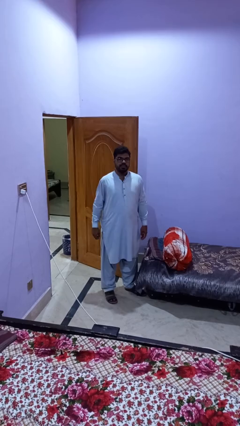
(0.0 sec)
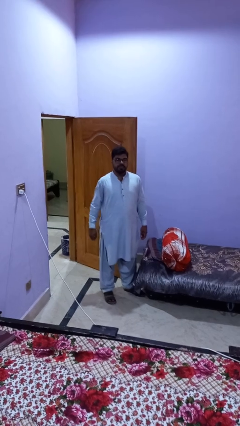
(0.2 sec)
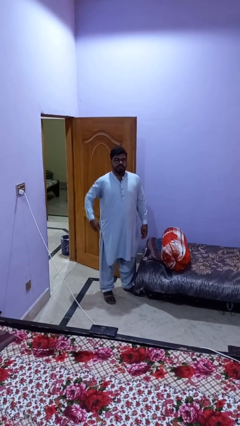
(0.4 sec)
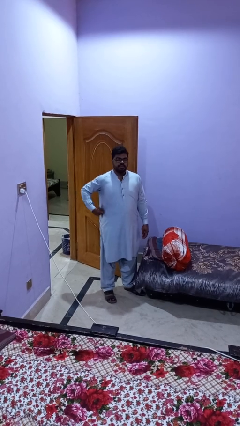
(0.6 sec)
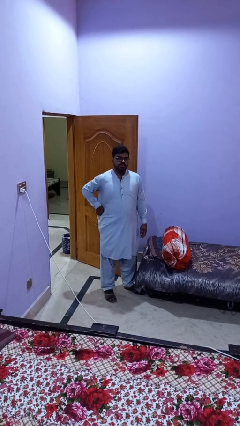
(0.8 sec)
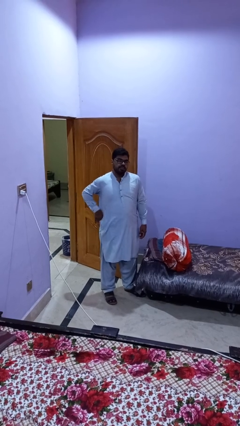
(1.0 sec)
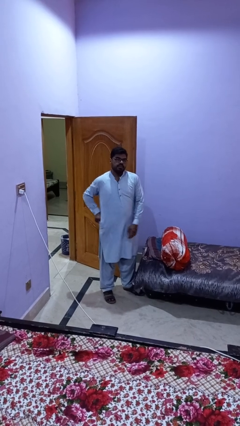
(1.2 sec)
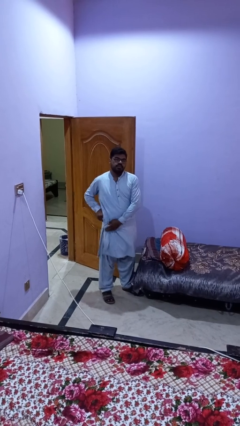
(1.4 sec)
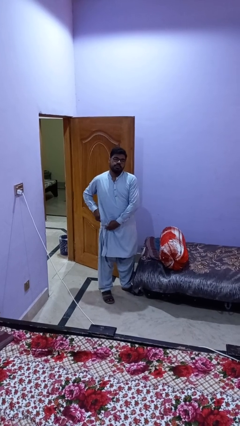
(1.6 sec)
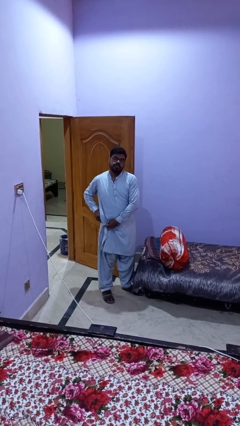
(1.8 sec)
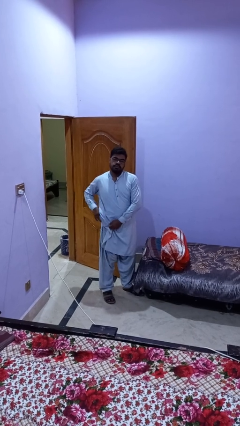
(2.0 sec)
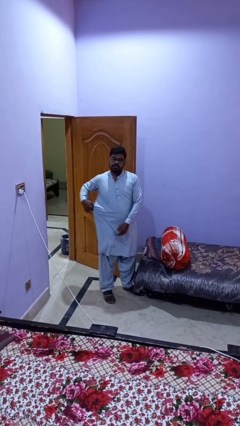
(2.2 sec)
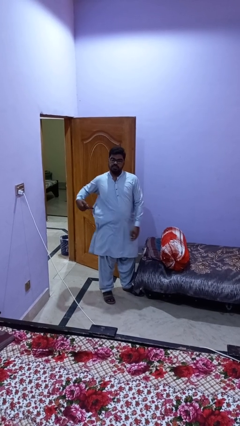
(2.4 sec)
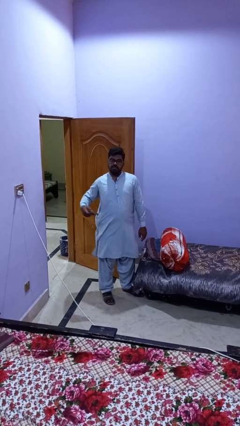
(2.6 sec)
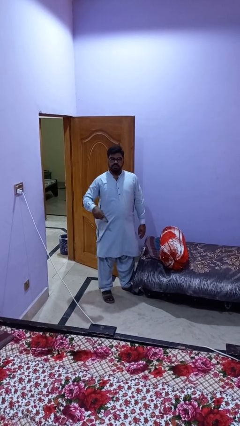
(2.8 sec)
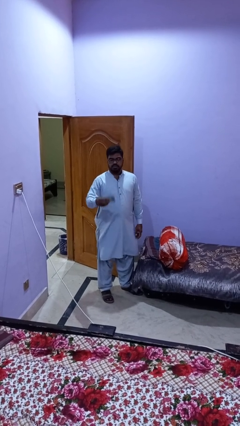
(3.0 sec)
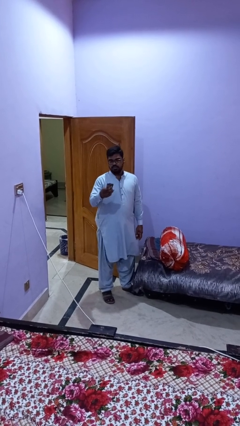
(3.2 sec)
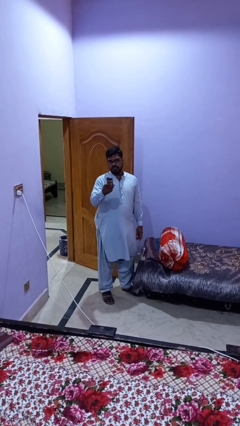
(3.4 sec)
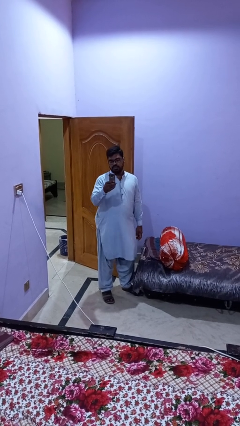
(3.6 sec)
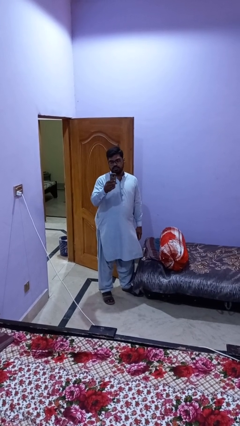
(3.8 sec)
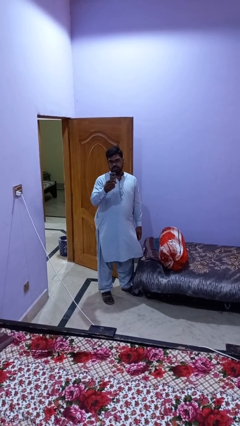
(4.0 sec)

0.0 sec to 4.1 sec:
person takes phone from pocket

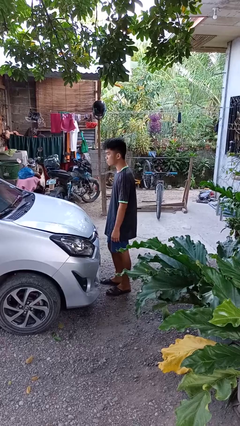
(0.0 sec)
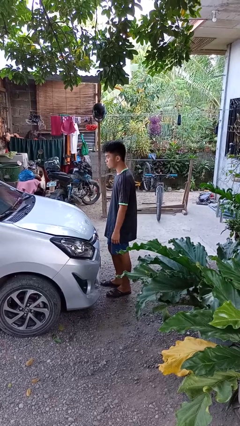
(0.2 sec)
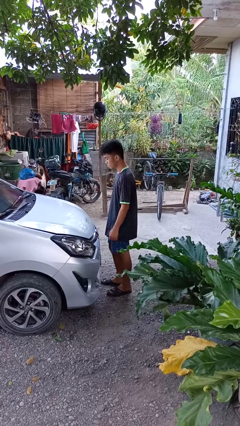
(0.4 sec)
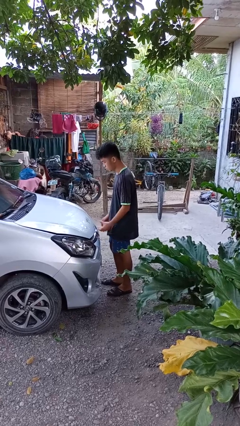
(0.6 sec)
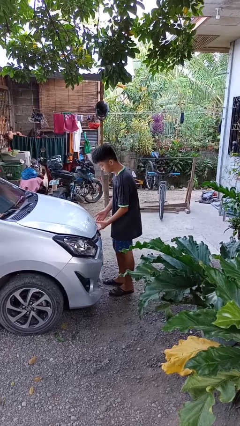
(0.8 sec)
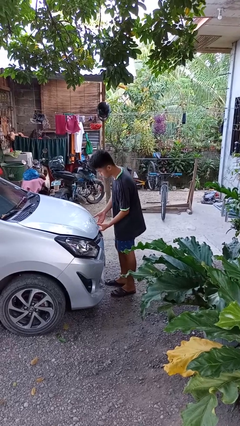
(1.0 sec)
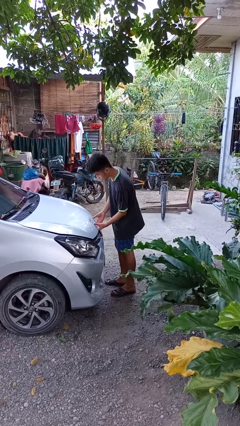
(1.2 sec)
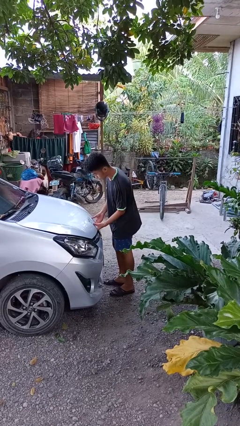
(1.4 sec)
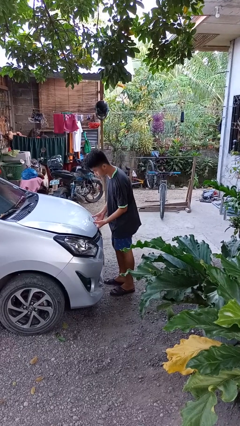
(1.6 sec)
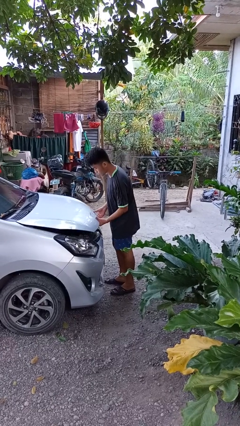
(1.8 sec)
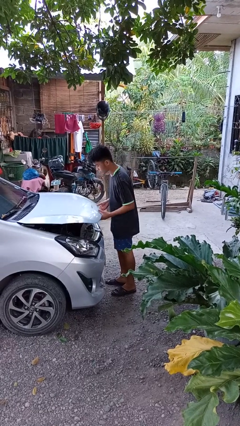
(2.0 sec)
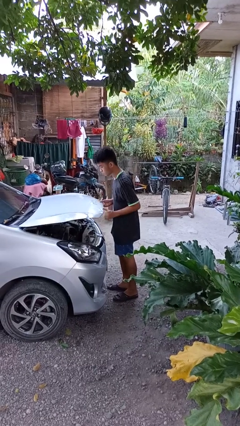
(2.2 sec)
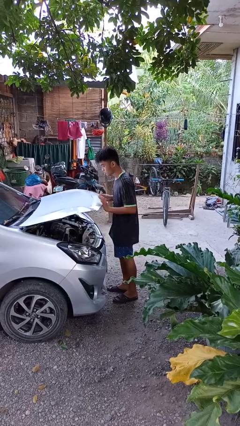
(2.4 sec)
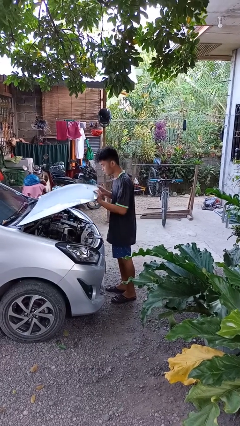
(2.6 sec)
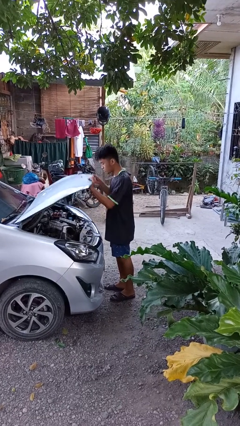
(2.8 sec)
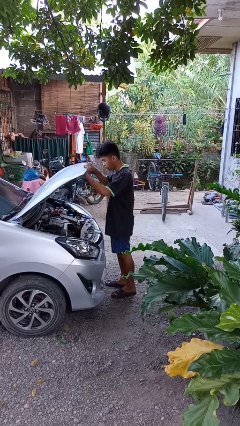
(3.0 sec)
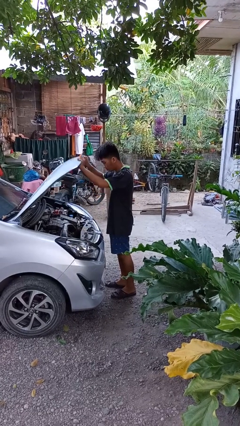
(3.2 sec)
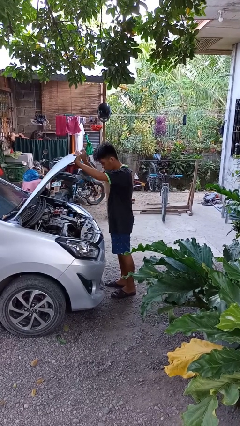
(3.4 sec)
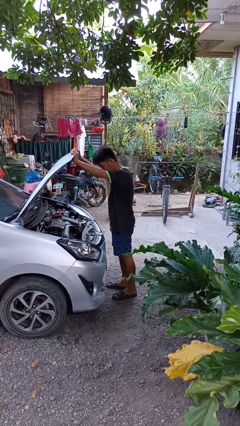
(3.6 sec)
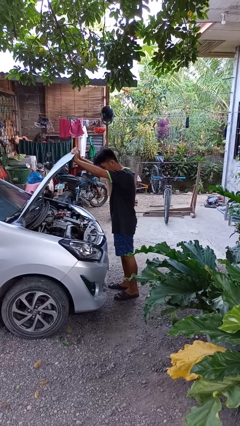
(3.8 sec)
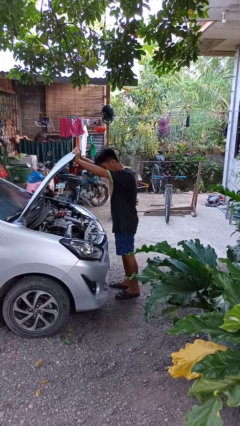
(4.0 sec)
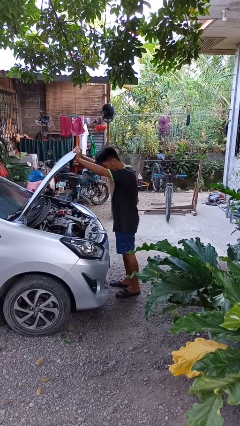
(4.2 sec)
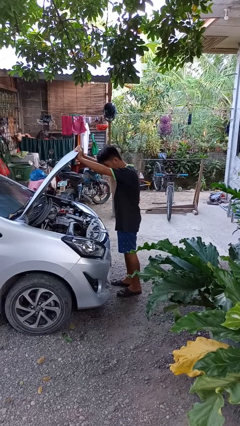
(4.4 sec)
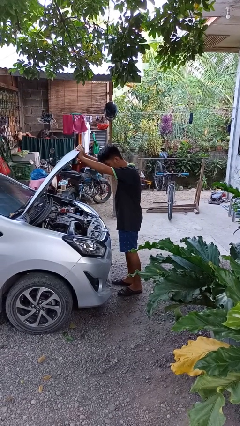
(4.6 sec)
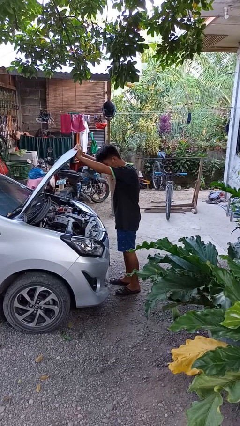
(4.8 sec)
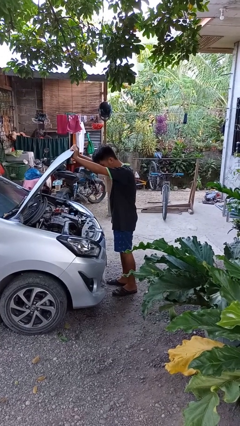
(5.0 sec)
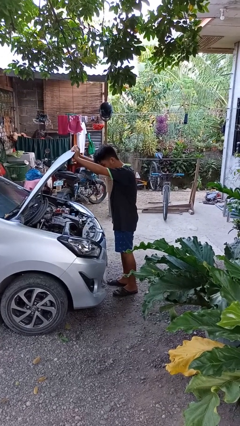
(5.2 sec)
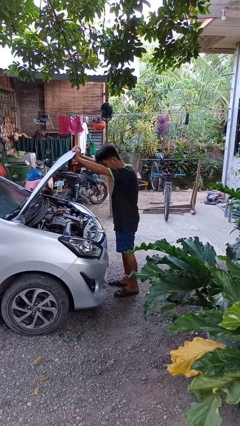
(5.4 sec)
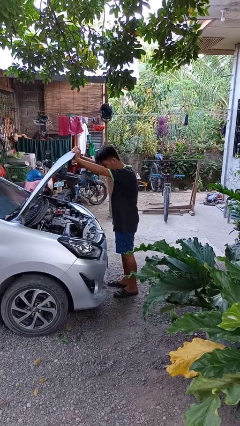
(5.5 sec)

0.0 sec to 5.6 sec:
person opens car hood

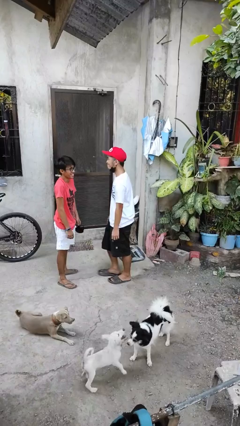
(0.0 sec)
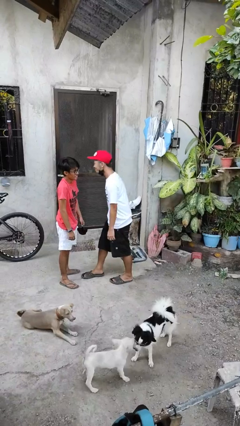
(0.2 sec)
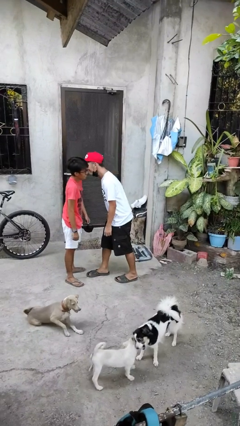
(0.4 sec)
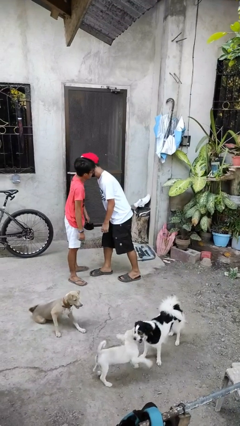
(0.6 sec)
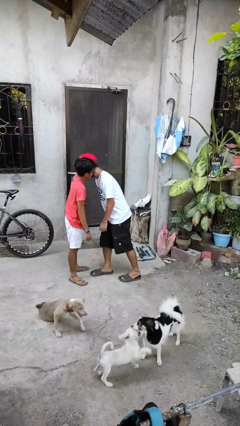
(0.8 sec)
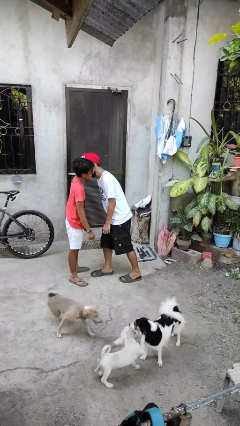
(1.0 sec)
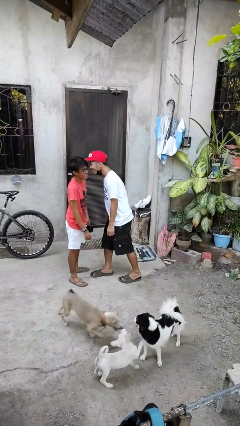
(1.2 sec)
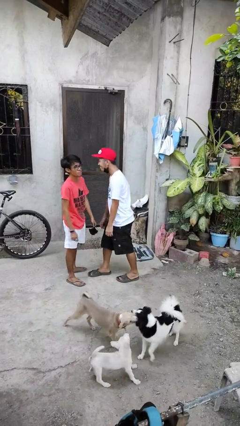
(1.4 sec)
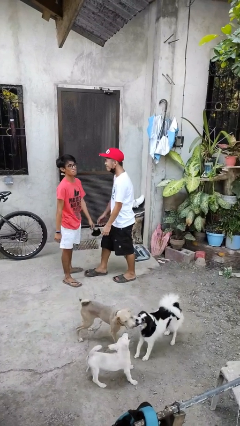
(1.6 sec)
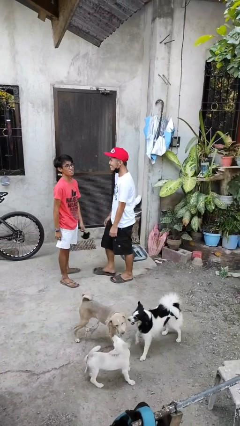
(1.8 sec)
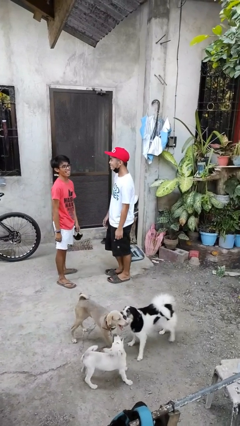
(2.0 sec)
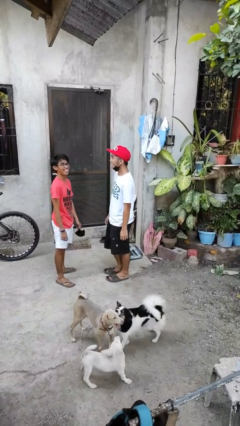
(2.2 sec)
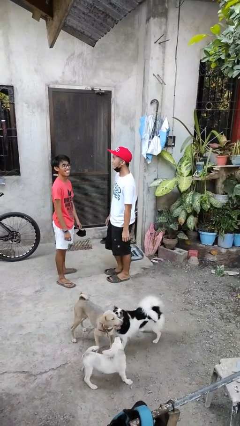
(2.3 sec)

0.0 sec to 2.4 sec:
person kisses cheek of person

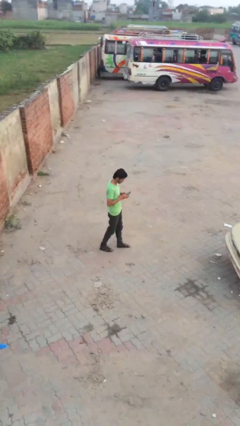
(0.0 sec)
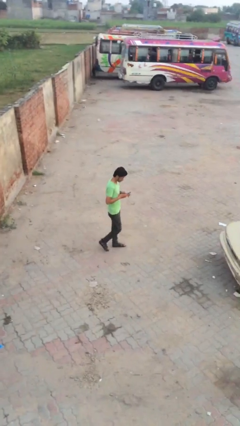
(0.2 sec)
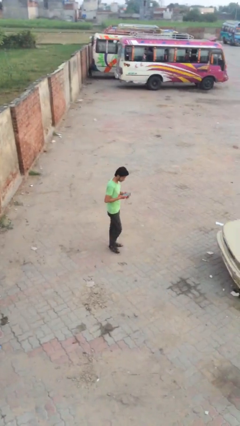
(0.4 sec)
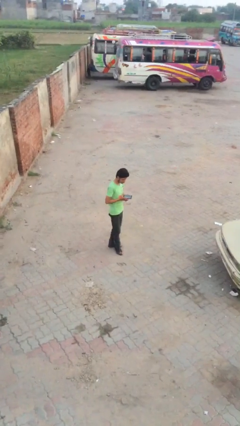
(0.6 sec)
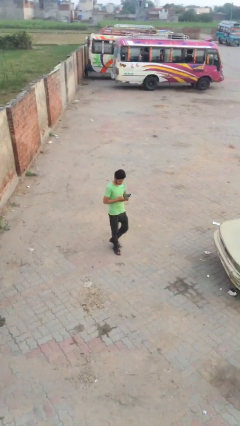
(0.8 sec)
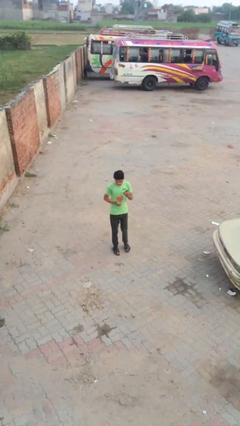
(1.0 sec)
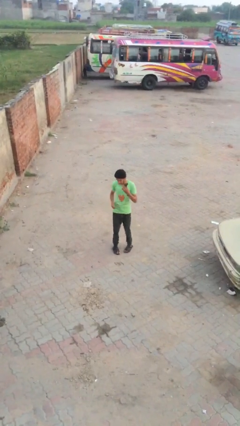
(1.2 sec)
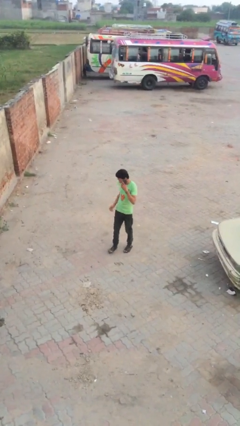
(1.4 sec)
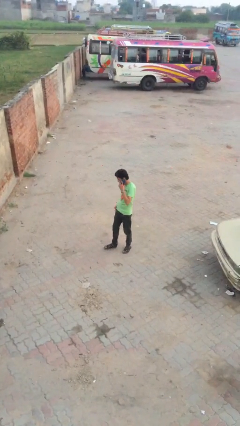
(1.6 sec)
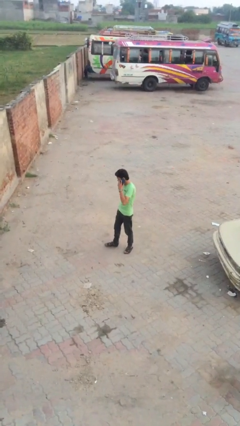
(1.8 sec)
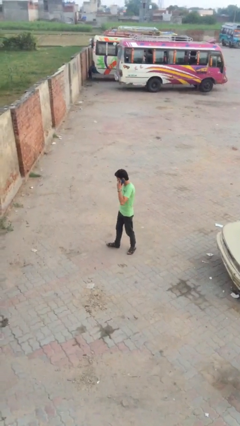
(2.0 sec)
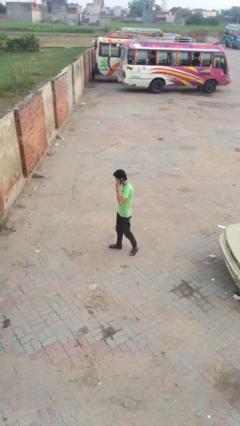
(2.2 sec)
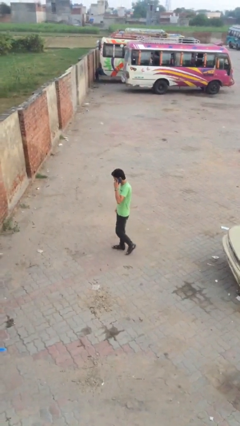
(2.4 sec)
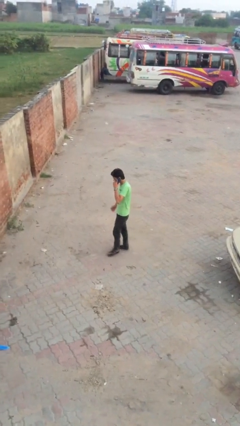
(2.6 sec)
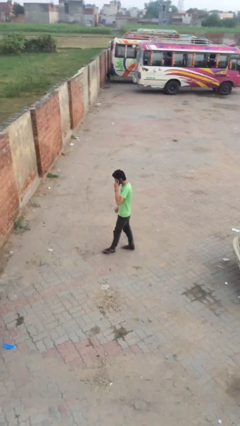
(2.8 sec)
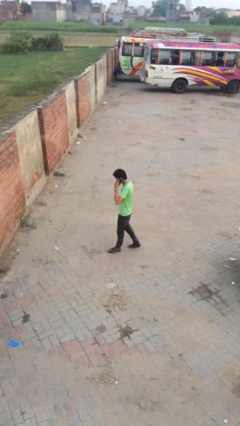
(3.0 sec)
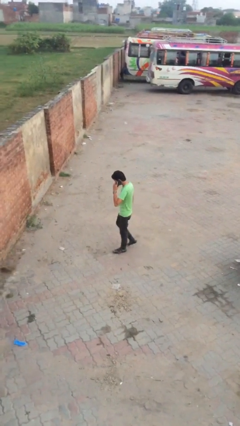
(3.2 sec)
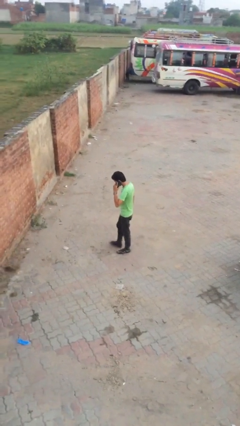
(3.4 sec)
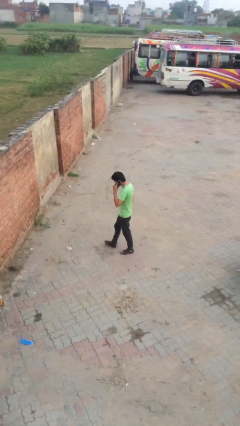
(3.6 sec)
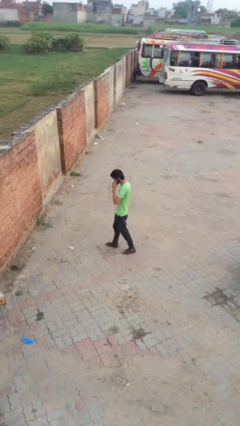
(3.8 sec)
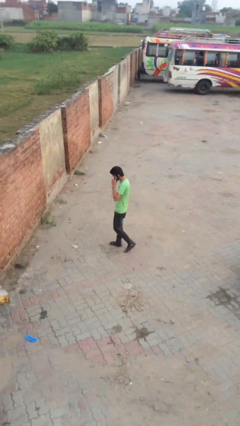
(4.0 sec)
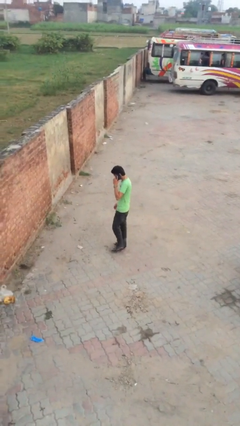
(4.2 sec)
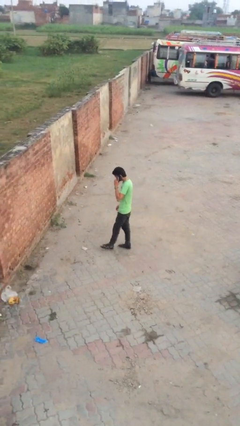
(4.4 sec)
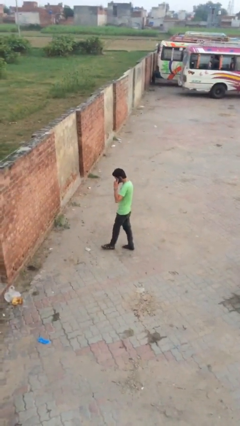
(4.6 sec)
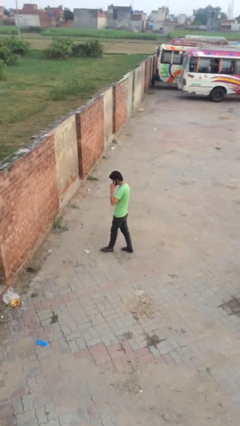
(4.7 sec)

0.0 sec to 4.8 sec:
person talks on phone

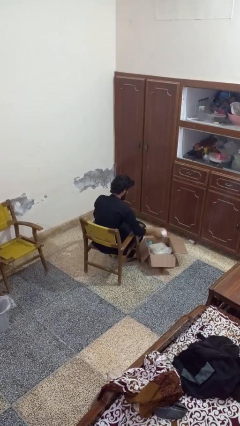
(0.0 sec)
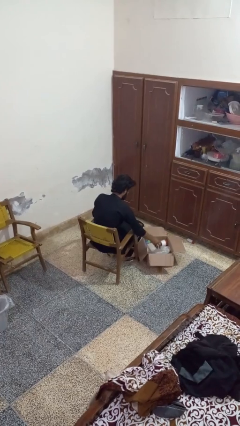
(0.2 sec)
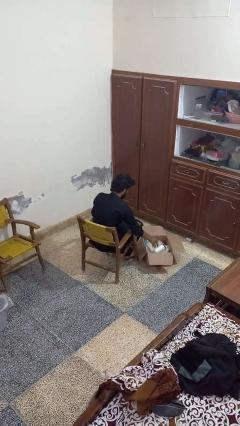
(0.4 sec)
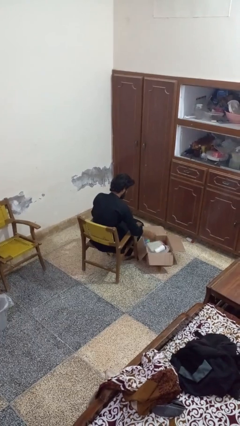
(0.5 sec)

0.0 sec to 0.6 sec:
person puts object into box

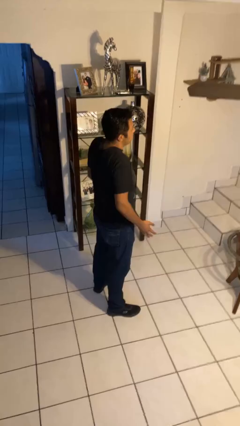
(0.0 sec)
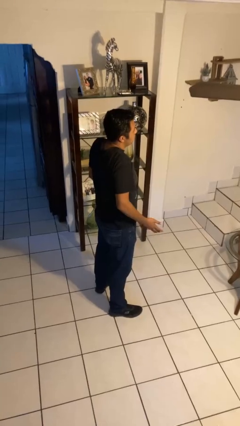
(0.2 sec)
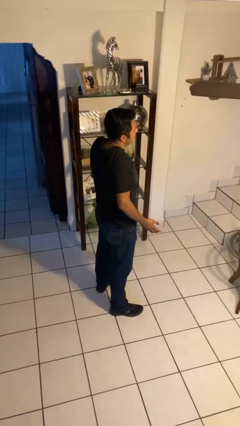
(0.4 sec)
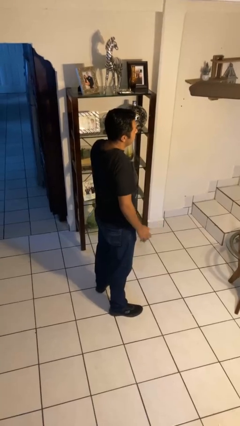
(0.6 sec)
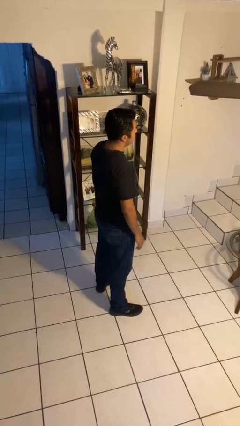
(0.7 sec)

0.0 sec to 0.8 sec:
person shrugs
